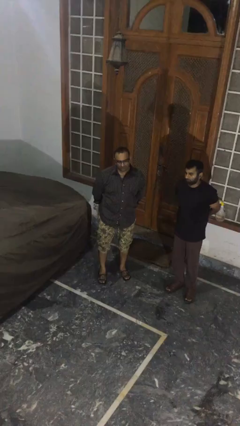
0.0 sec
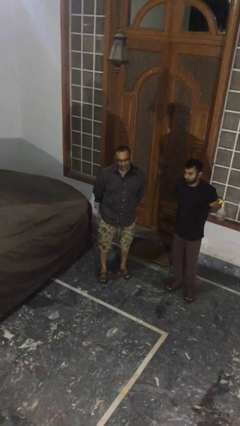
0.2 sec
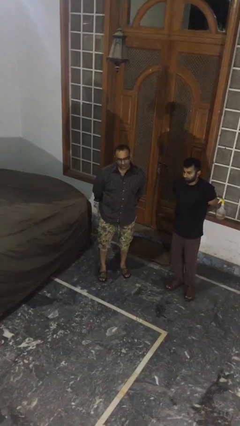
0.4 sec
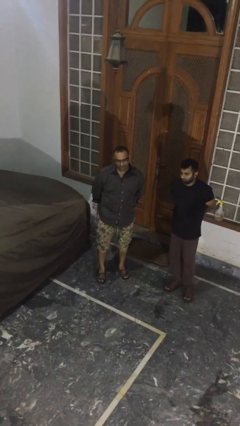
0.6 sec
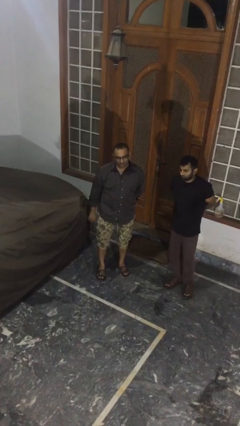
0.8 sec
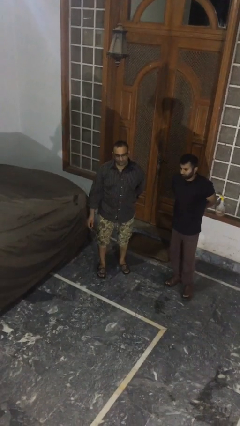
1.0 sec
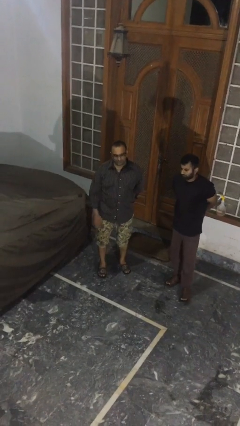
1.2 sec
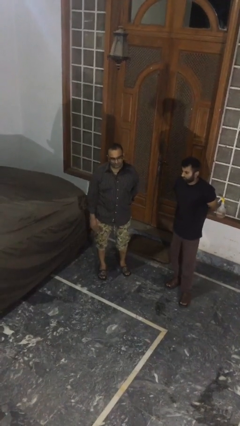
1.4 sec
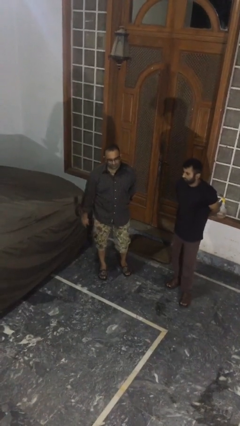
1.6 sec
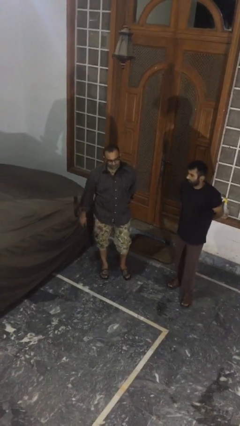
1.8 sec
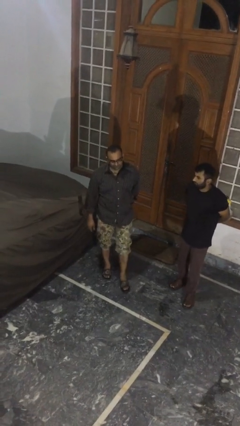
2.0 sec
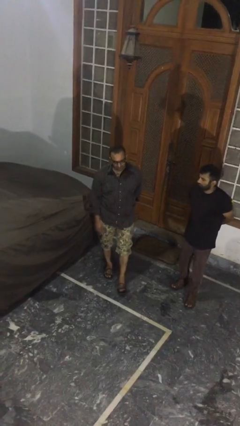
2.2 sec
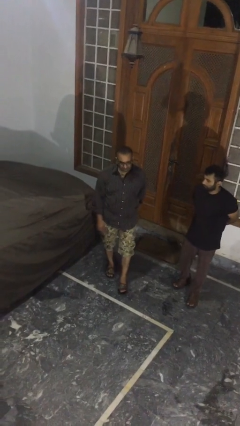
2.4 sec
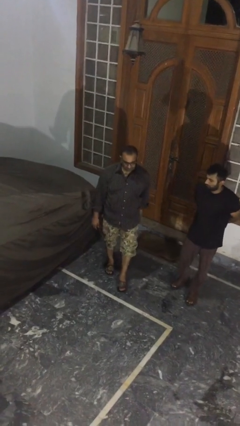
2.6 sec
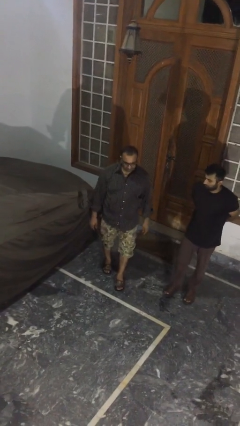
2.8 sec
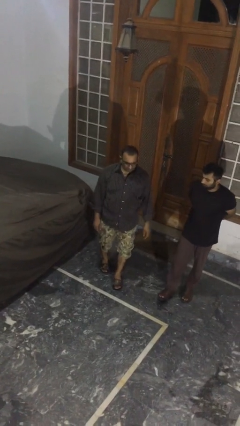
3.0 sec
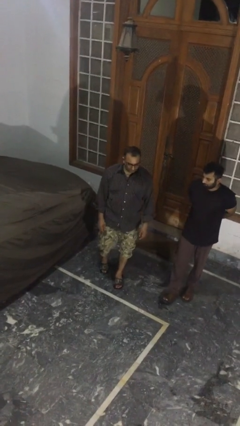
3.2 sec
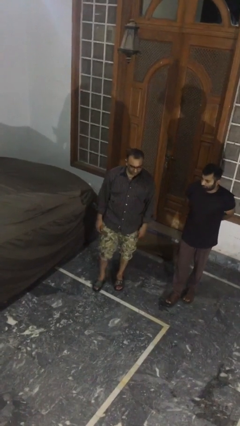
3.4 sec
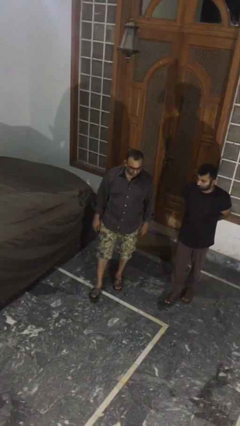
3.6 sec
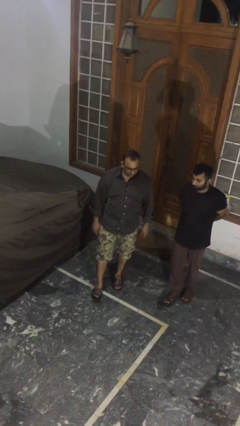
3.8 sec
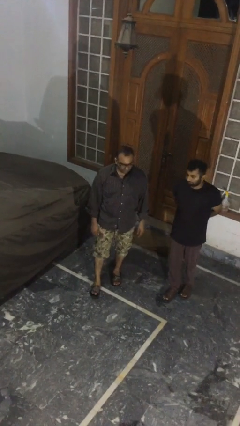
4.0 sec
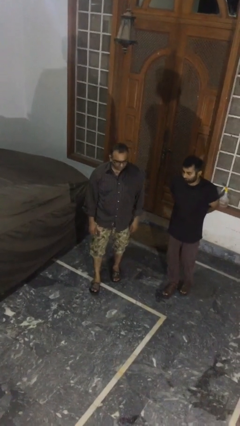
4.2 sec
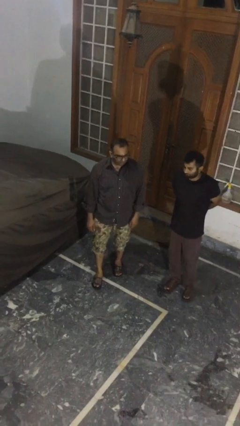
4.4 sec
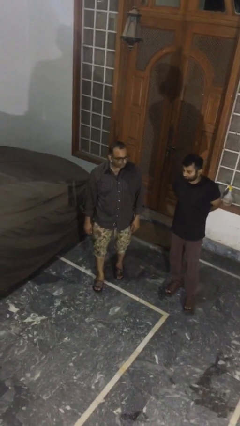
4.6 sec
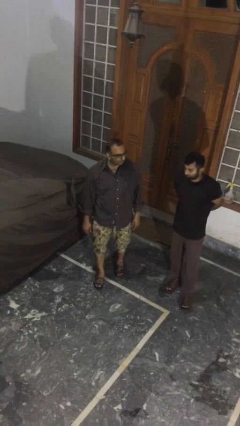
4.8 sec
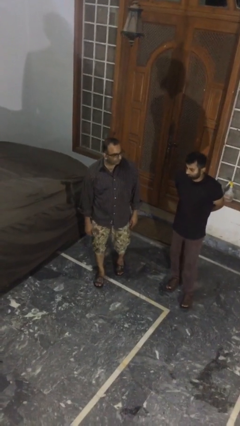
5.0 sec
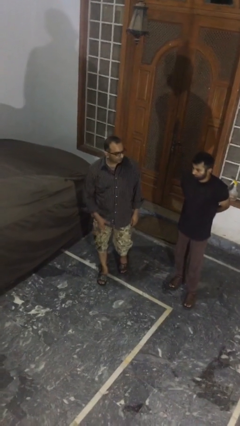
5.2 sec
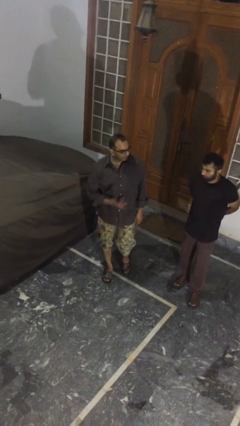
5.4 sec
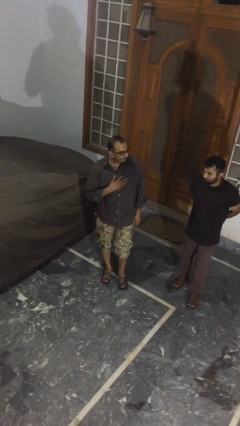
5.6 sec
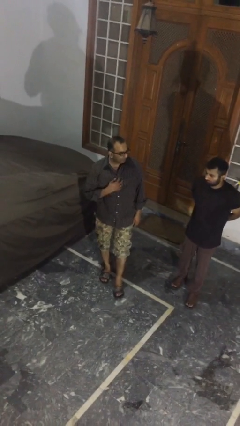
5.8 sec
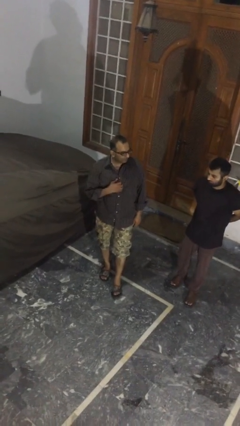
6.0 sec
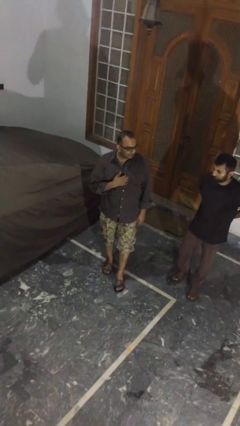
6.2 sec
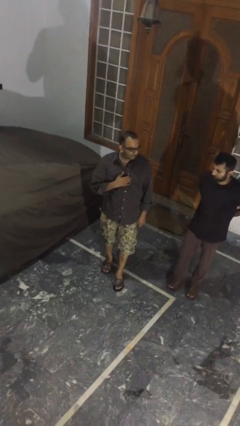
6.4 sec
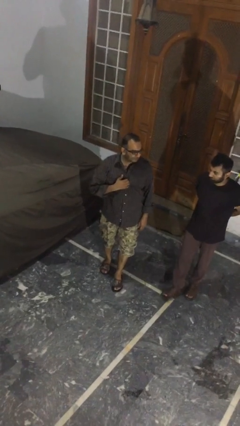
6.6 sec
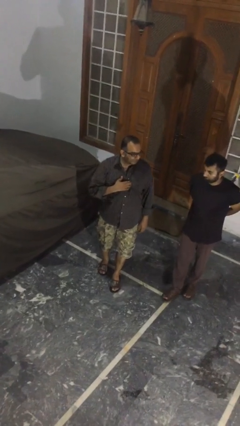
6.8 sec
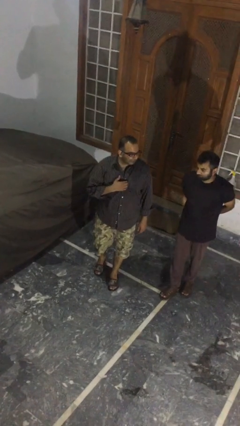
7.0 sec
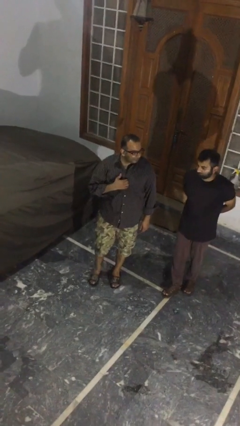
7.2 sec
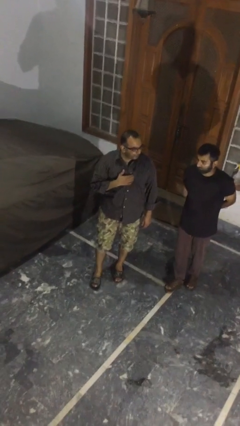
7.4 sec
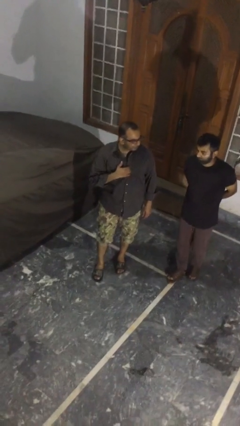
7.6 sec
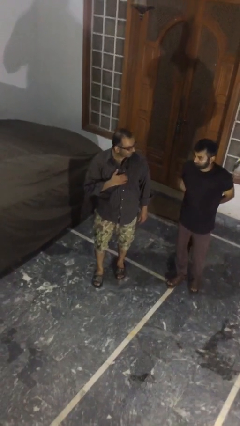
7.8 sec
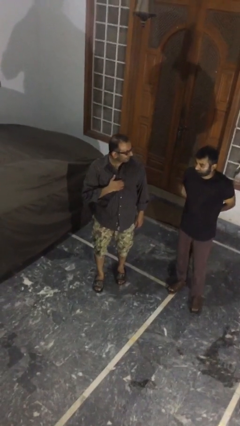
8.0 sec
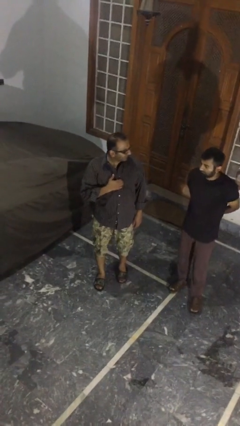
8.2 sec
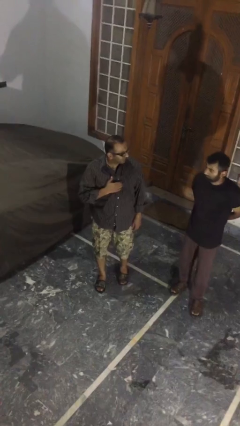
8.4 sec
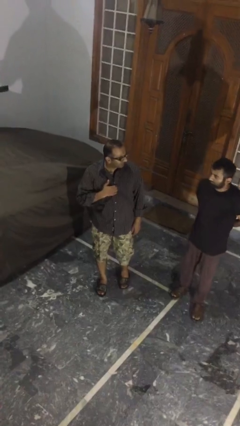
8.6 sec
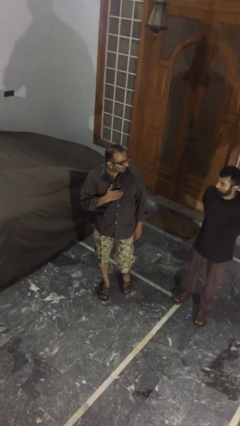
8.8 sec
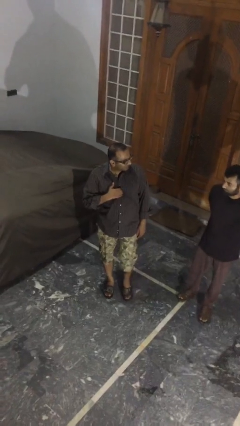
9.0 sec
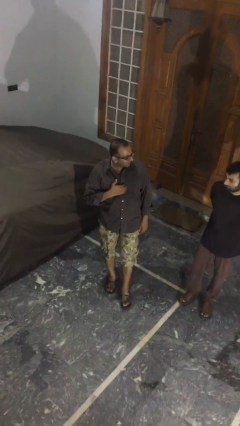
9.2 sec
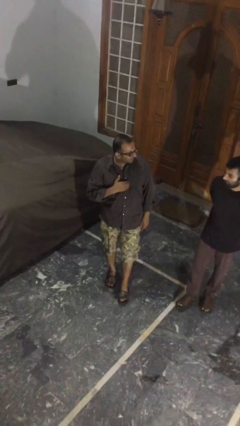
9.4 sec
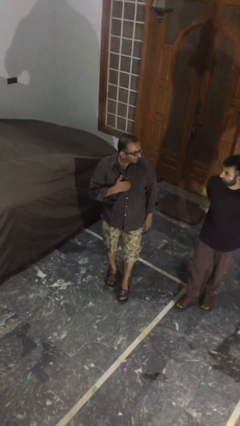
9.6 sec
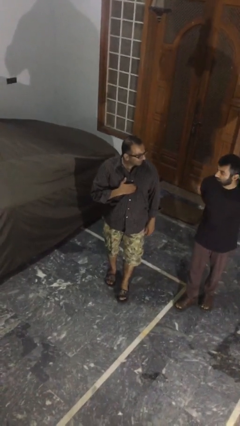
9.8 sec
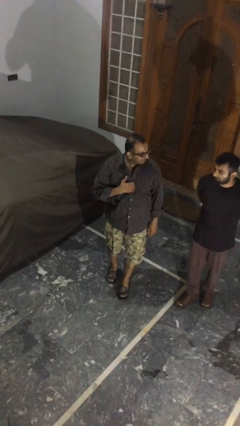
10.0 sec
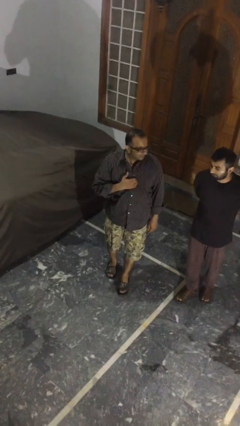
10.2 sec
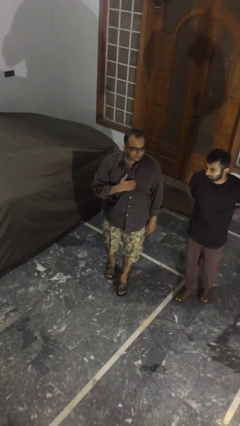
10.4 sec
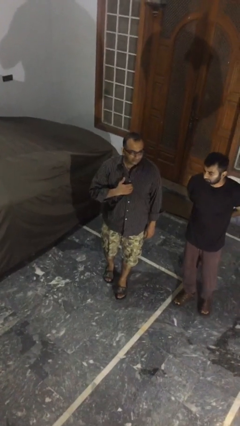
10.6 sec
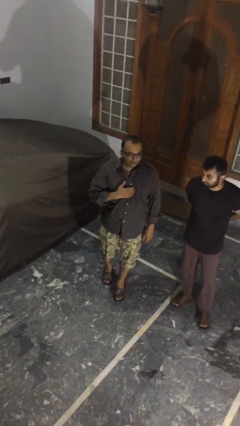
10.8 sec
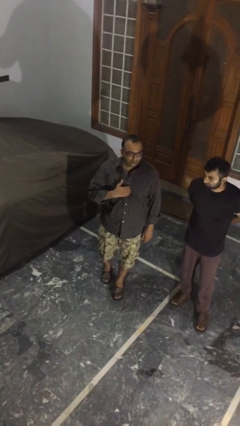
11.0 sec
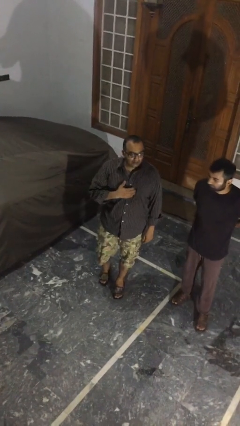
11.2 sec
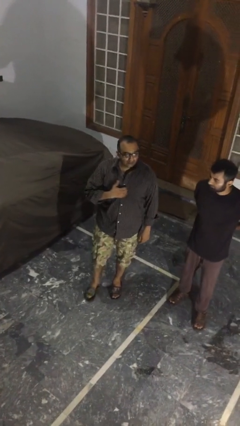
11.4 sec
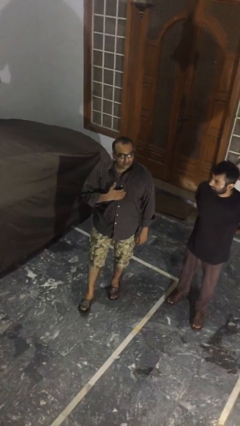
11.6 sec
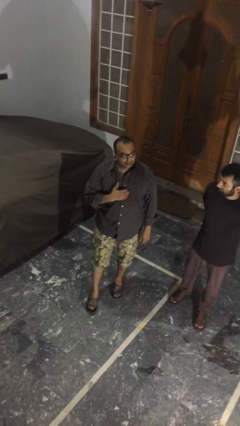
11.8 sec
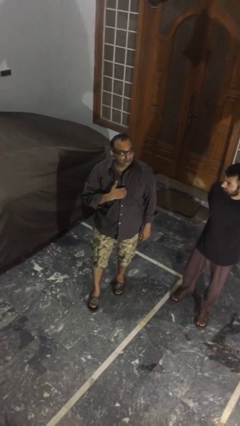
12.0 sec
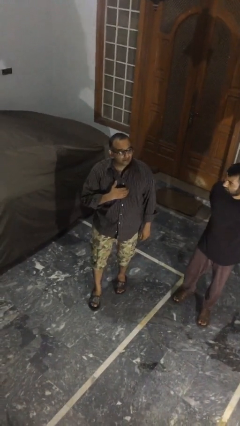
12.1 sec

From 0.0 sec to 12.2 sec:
person talks to person

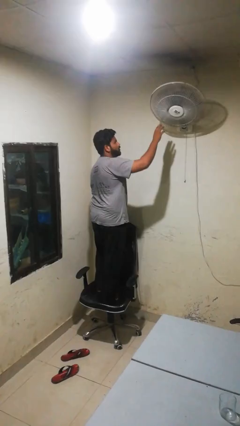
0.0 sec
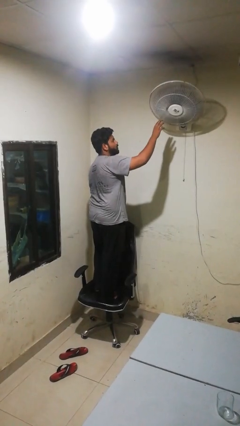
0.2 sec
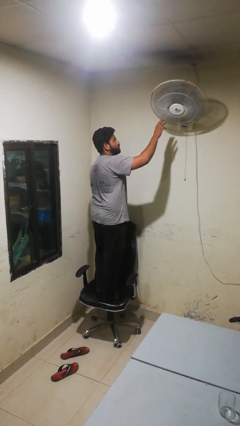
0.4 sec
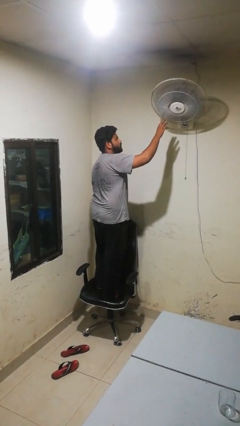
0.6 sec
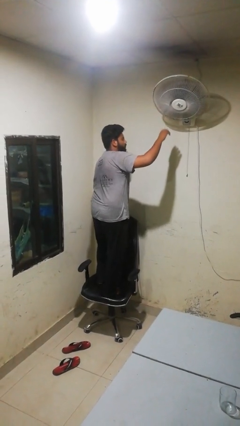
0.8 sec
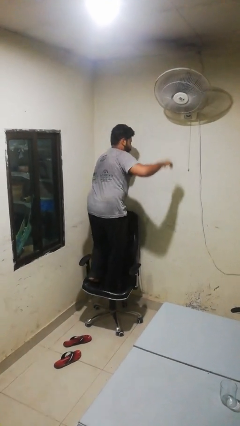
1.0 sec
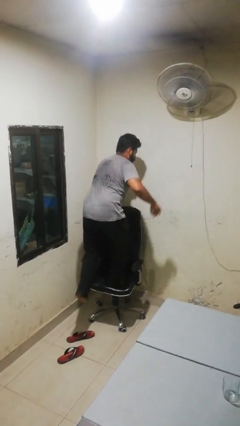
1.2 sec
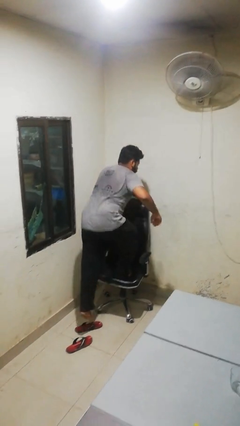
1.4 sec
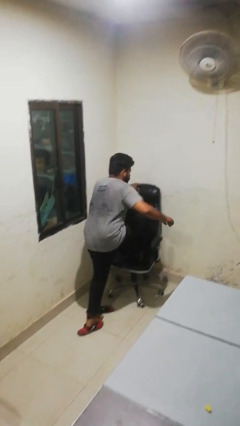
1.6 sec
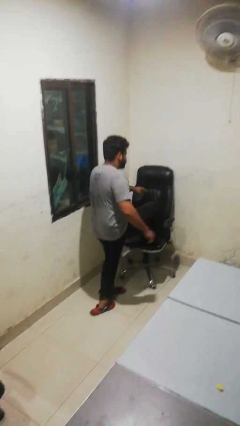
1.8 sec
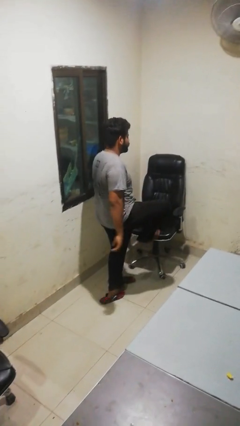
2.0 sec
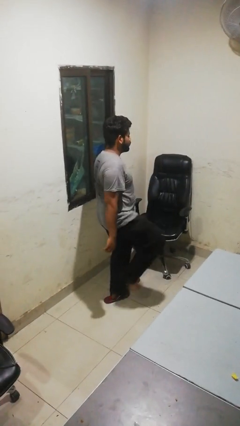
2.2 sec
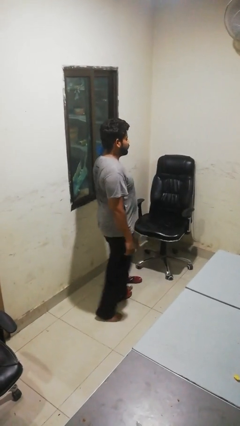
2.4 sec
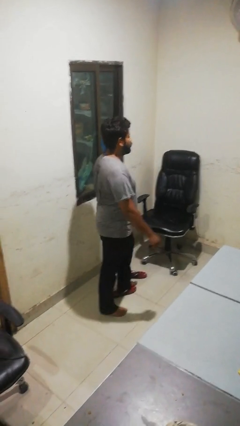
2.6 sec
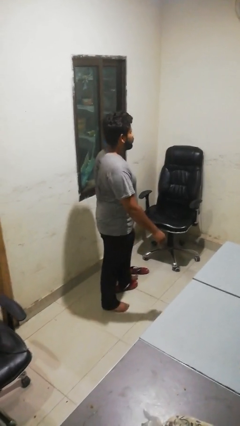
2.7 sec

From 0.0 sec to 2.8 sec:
person climbs off chair

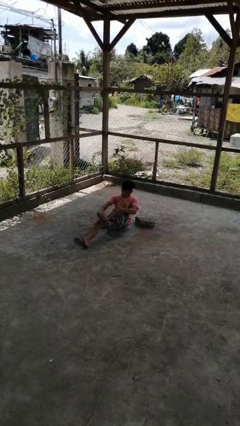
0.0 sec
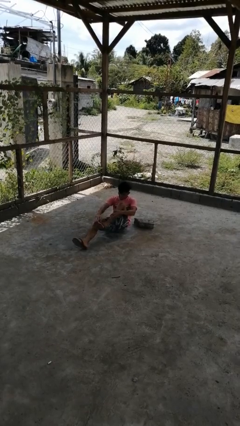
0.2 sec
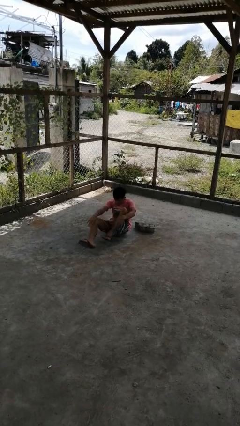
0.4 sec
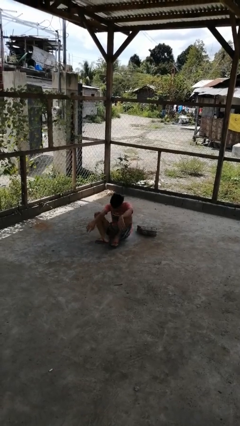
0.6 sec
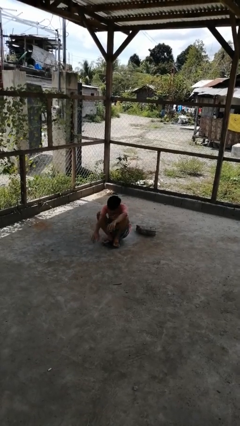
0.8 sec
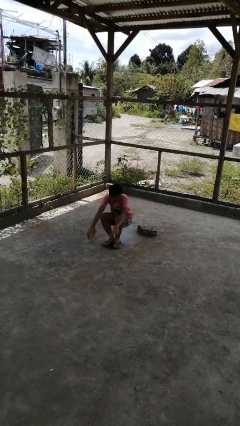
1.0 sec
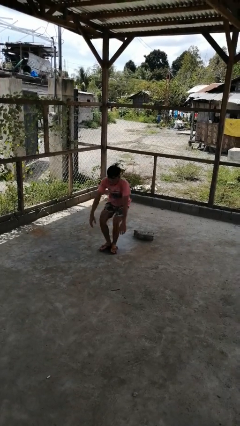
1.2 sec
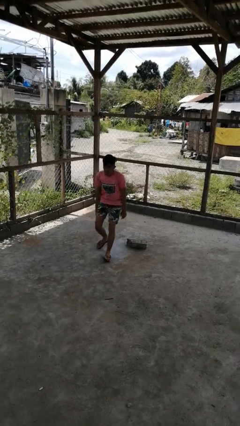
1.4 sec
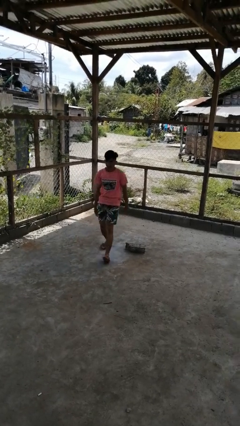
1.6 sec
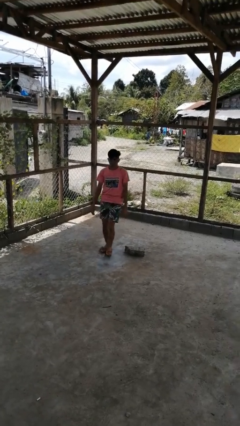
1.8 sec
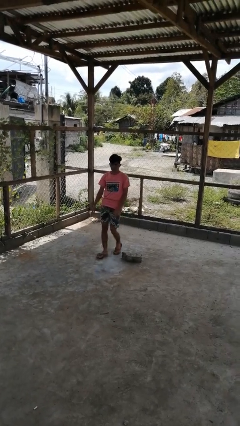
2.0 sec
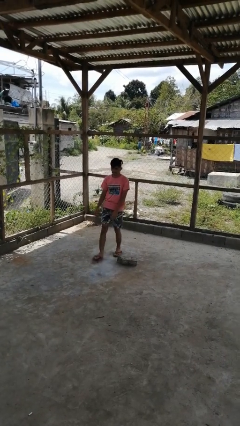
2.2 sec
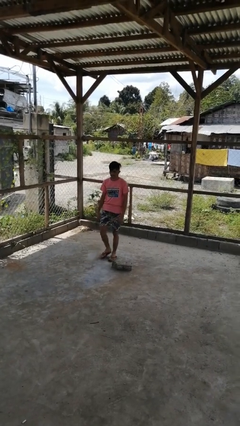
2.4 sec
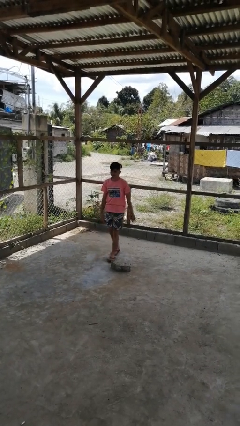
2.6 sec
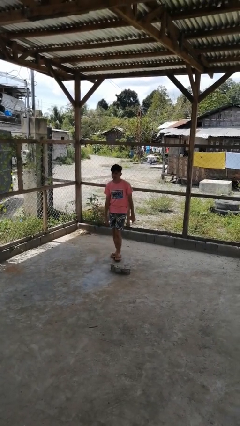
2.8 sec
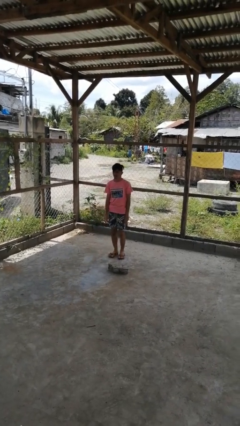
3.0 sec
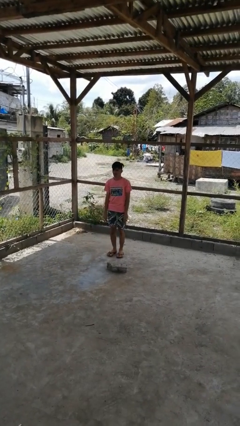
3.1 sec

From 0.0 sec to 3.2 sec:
person stands up from floor
